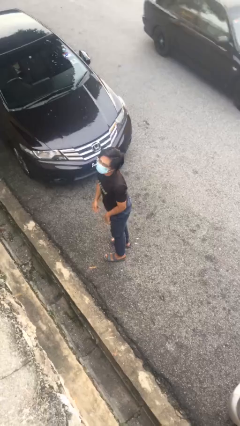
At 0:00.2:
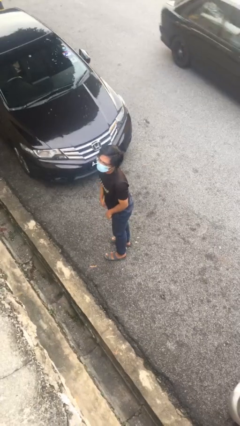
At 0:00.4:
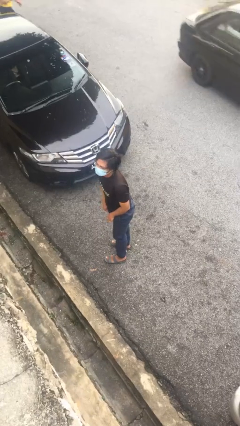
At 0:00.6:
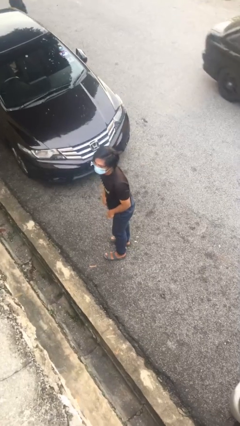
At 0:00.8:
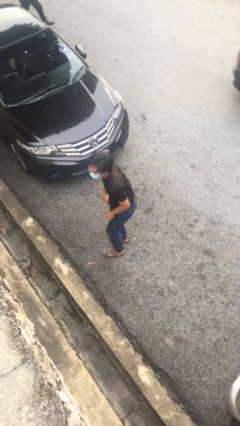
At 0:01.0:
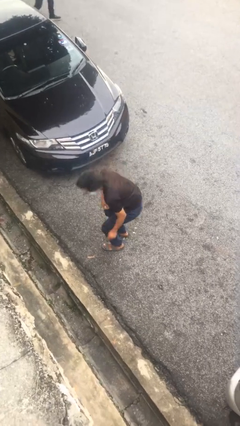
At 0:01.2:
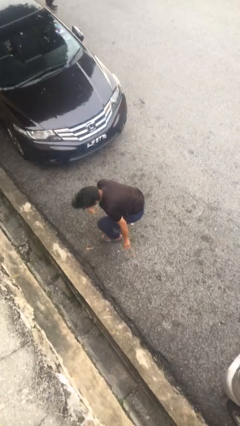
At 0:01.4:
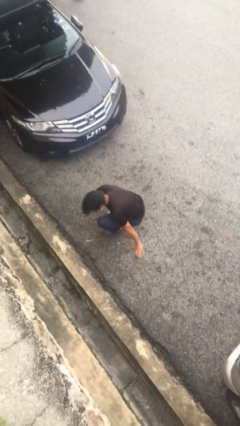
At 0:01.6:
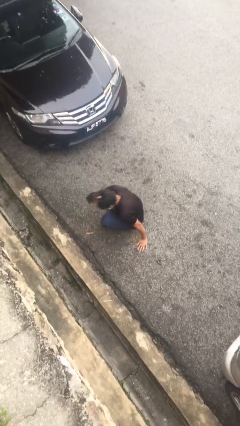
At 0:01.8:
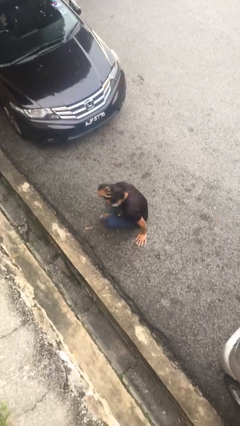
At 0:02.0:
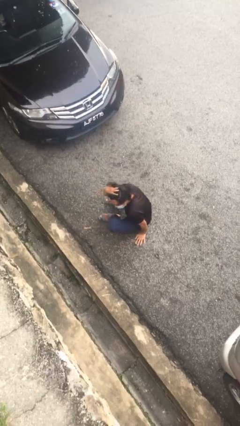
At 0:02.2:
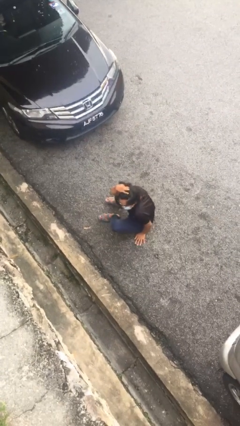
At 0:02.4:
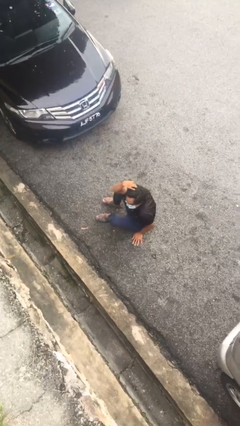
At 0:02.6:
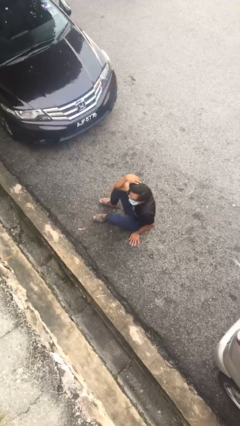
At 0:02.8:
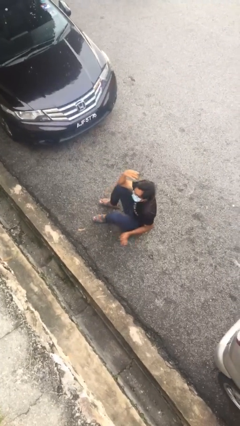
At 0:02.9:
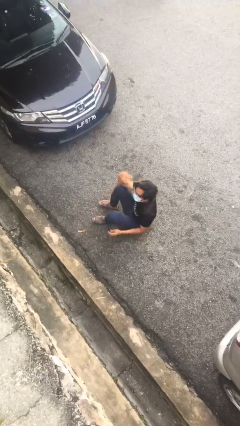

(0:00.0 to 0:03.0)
person sits down

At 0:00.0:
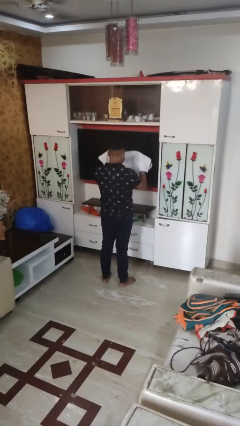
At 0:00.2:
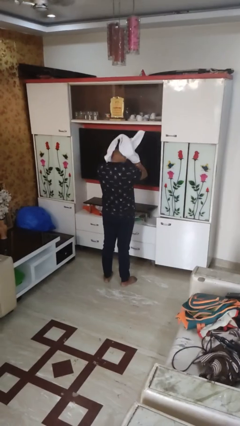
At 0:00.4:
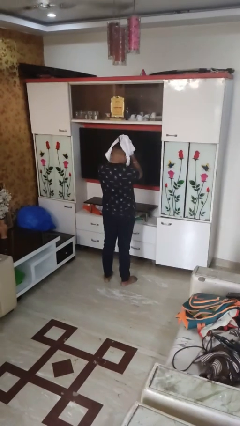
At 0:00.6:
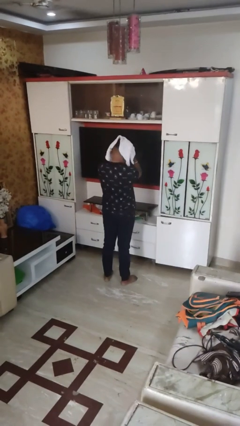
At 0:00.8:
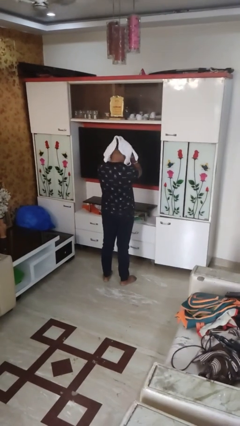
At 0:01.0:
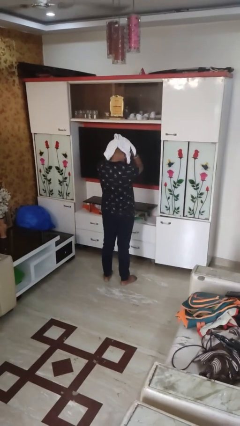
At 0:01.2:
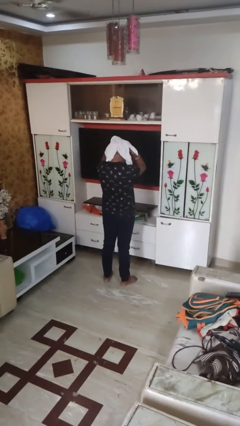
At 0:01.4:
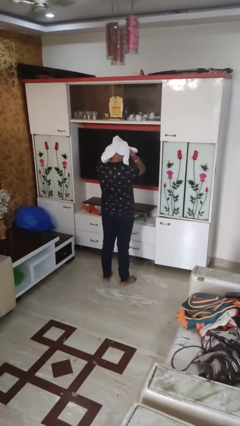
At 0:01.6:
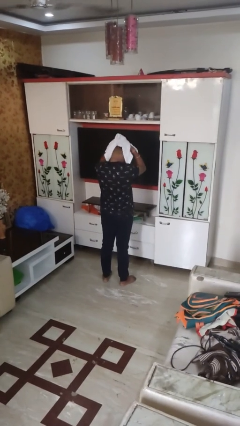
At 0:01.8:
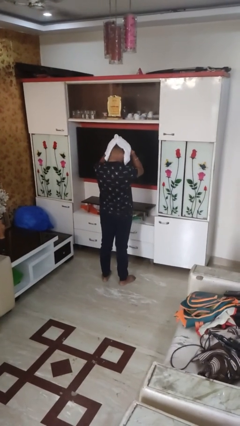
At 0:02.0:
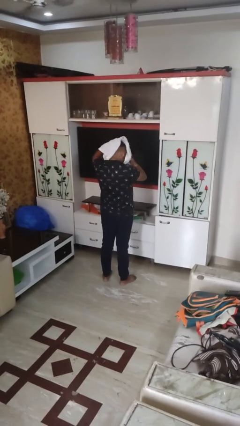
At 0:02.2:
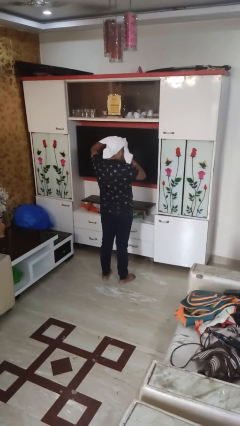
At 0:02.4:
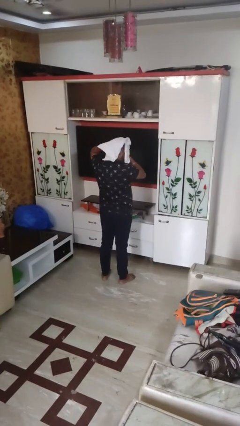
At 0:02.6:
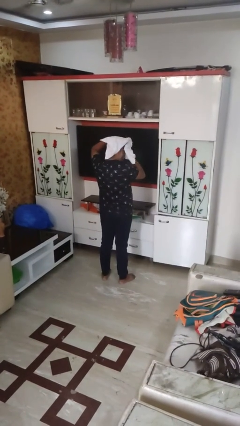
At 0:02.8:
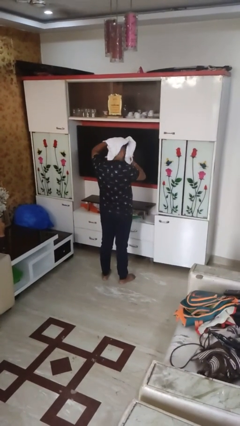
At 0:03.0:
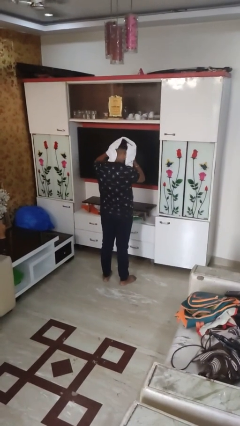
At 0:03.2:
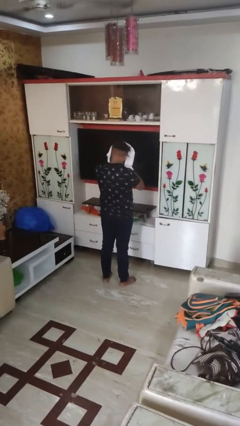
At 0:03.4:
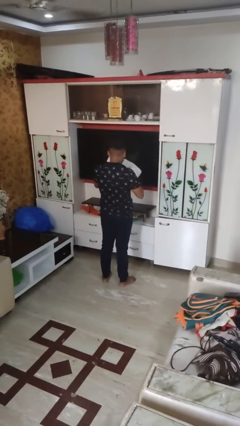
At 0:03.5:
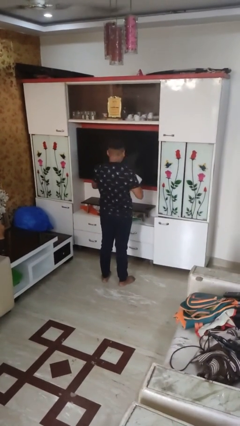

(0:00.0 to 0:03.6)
person dries hair with towel

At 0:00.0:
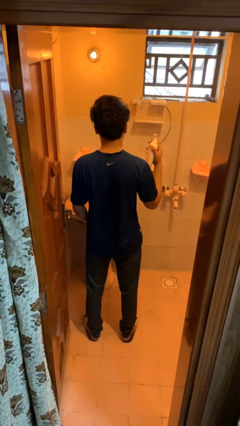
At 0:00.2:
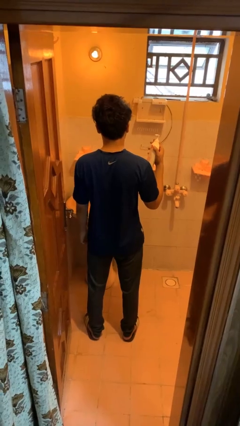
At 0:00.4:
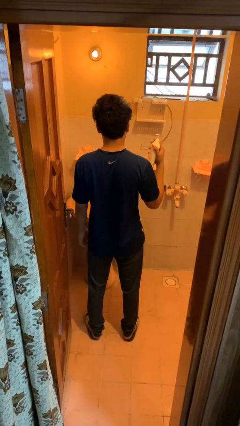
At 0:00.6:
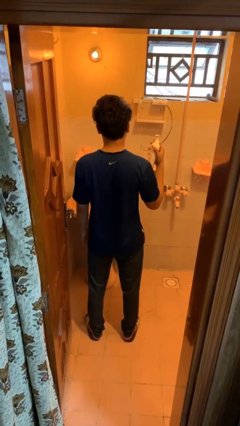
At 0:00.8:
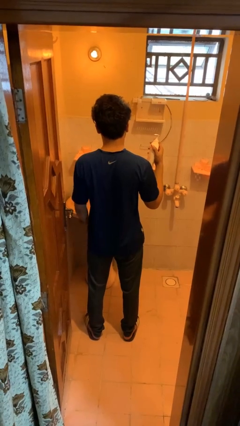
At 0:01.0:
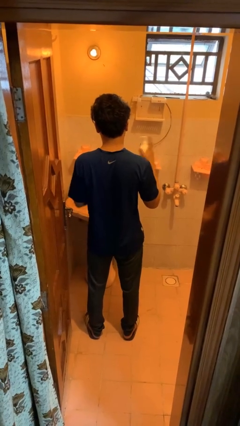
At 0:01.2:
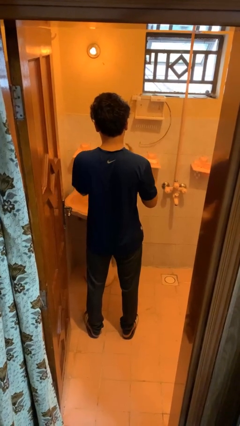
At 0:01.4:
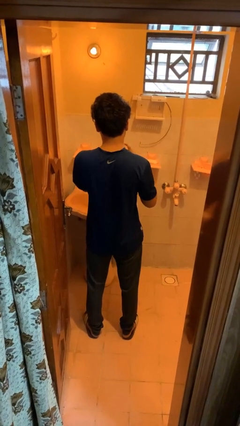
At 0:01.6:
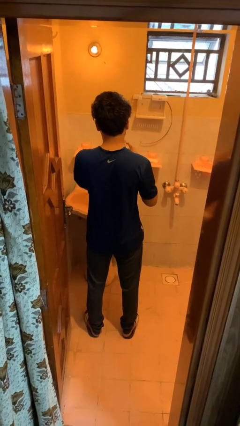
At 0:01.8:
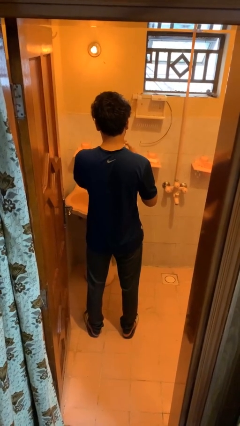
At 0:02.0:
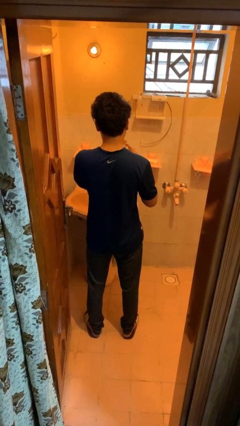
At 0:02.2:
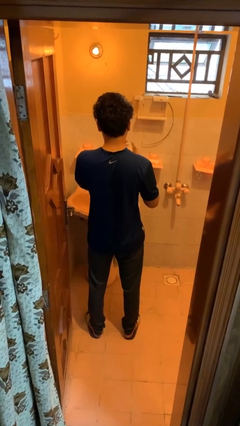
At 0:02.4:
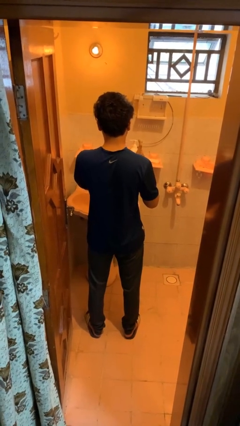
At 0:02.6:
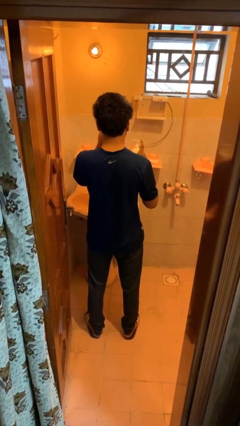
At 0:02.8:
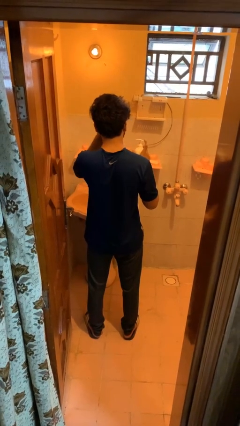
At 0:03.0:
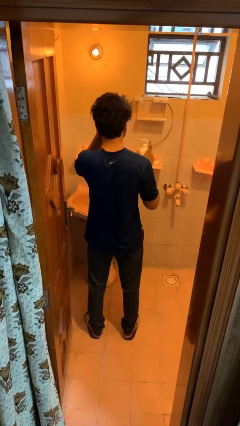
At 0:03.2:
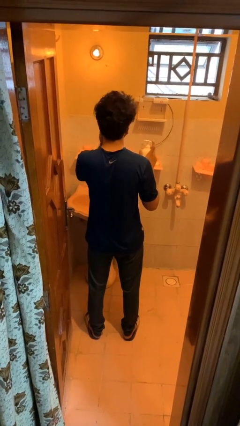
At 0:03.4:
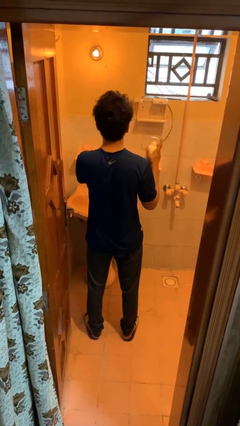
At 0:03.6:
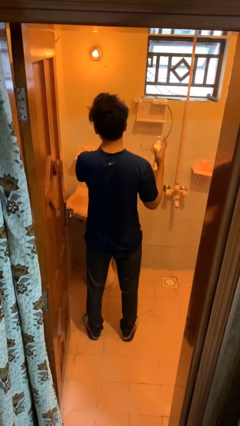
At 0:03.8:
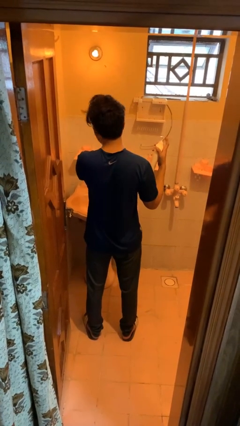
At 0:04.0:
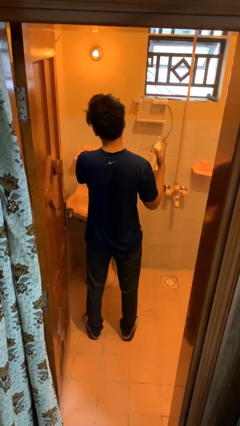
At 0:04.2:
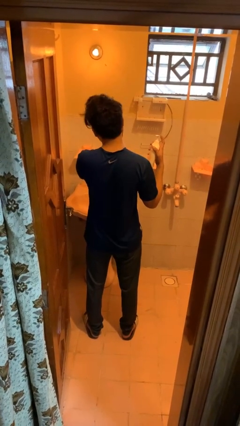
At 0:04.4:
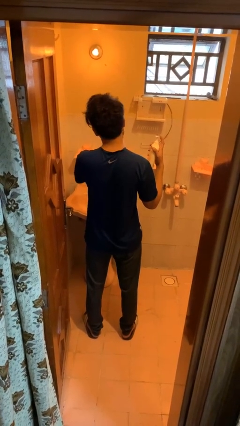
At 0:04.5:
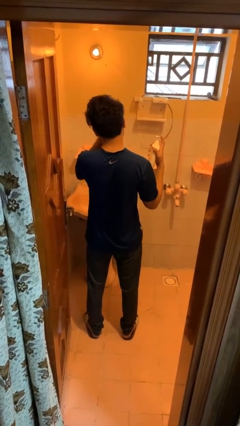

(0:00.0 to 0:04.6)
person applies facial moisturizer

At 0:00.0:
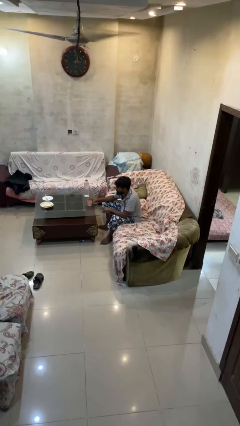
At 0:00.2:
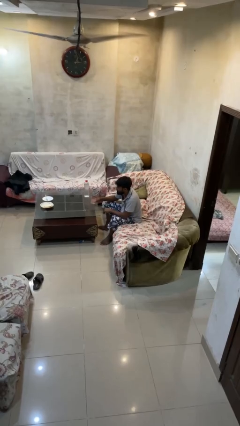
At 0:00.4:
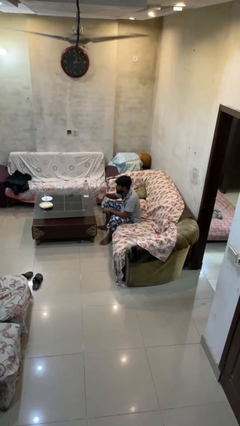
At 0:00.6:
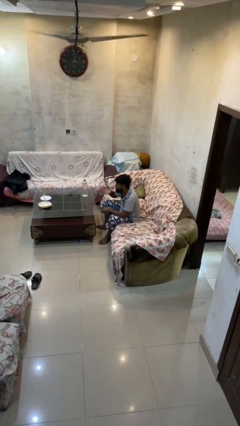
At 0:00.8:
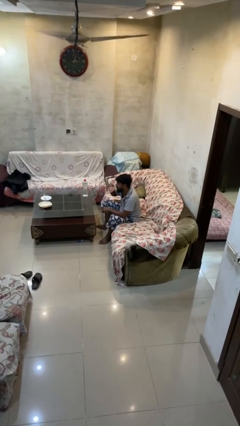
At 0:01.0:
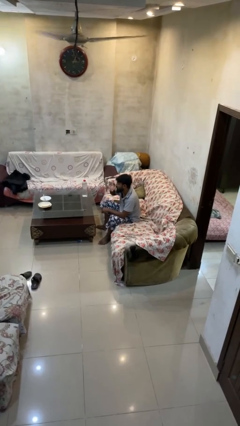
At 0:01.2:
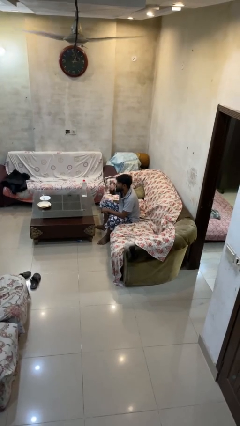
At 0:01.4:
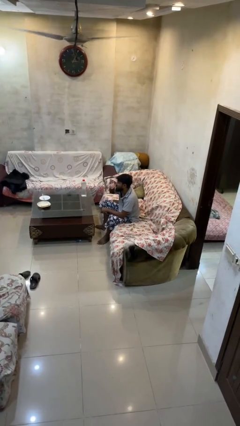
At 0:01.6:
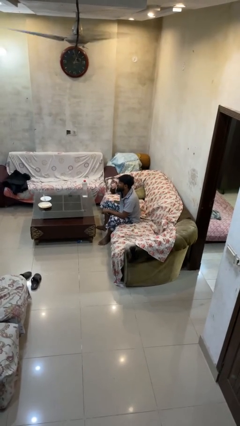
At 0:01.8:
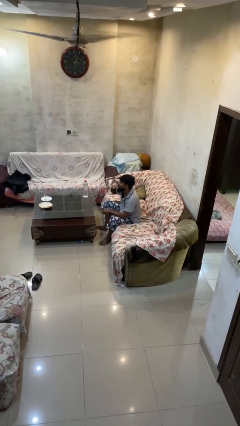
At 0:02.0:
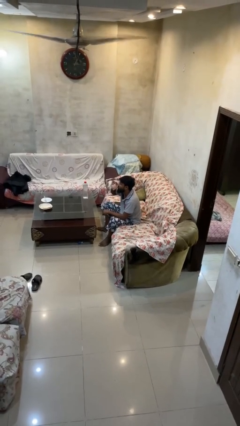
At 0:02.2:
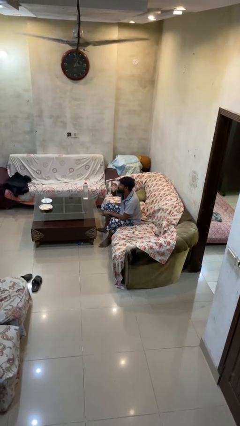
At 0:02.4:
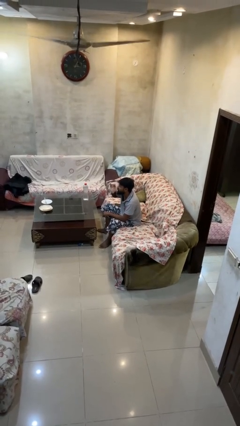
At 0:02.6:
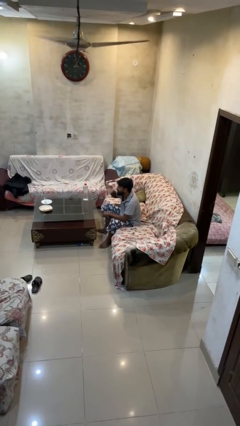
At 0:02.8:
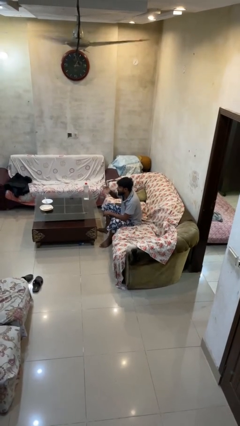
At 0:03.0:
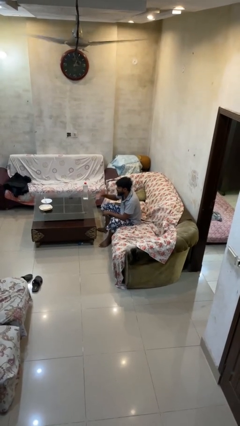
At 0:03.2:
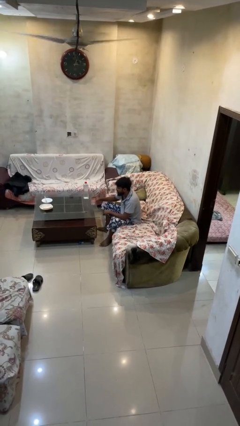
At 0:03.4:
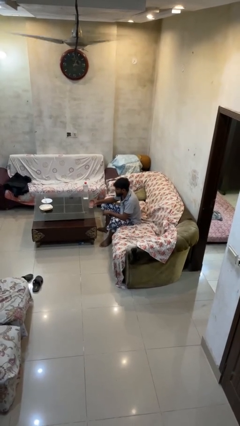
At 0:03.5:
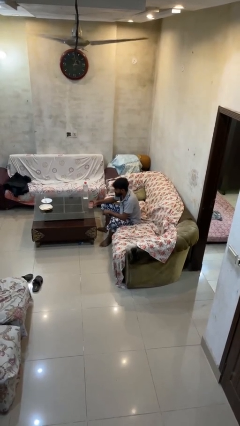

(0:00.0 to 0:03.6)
person drinks from cup

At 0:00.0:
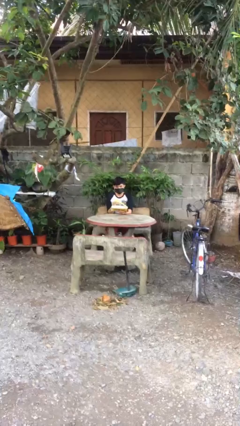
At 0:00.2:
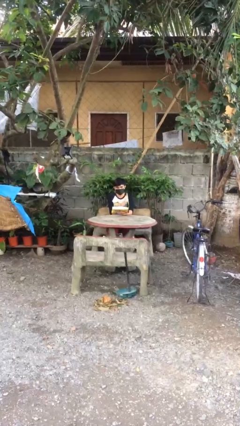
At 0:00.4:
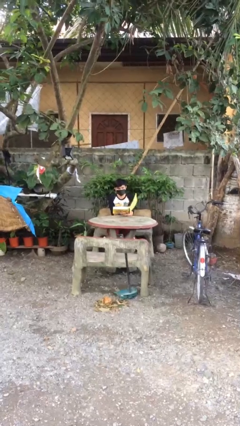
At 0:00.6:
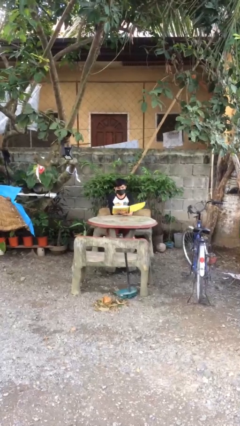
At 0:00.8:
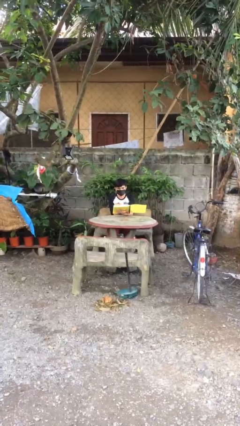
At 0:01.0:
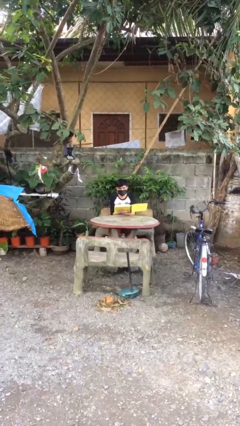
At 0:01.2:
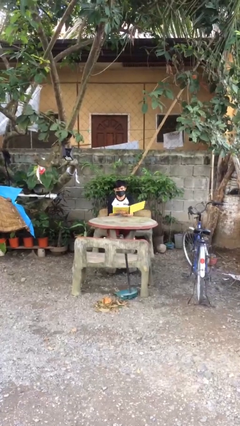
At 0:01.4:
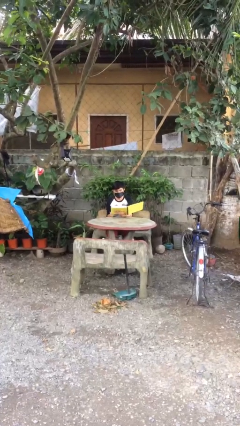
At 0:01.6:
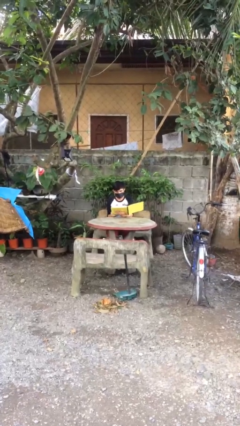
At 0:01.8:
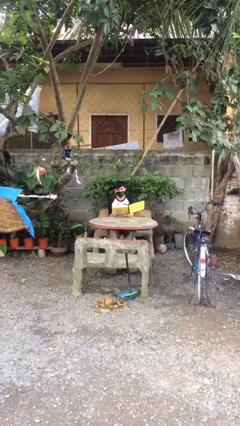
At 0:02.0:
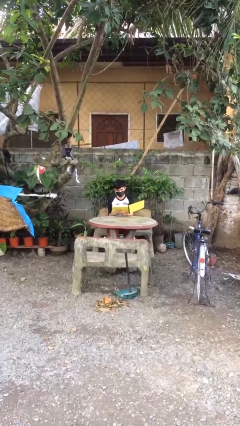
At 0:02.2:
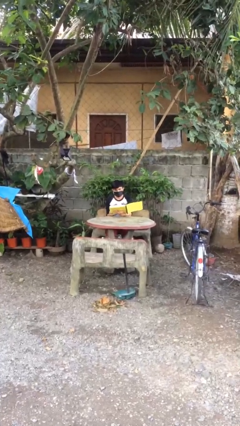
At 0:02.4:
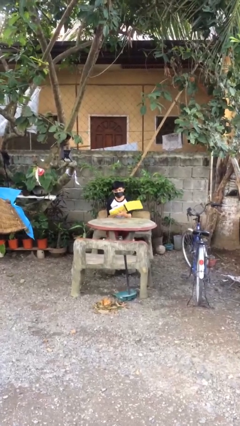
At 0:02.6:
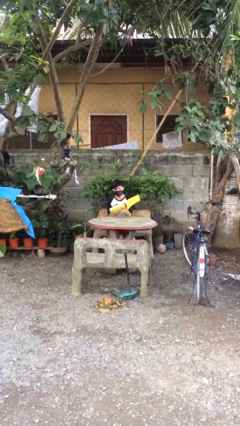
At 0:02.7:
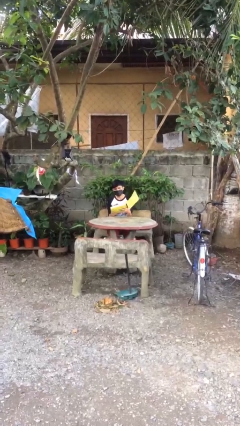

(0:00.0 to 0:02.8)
person reads document
